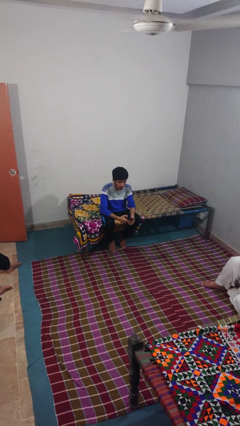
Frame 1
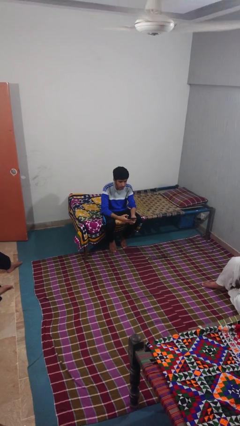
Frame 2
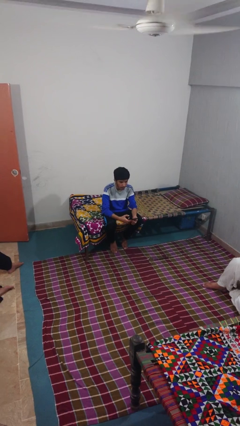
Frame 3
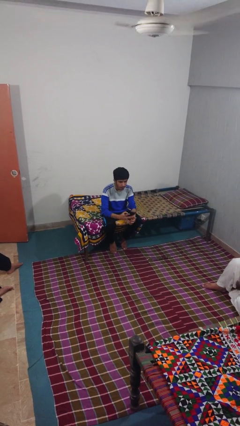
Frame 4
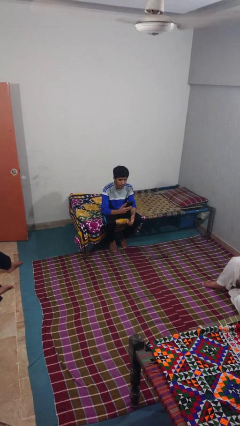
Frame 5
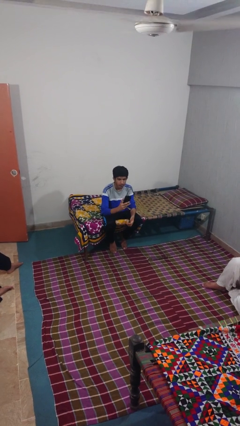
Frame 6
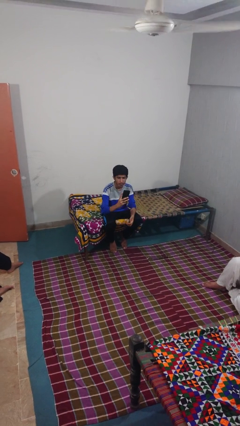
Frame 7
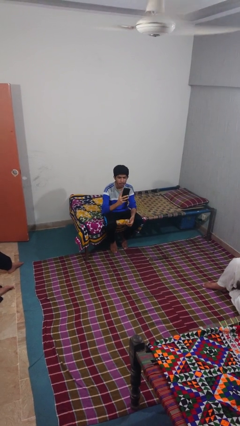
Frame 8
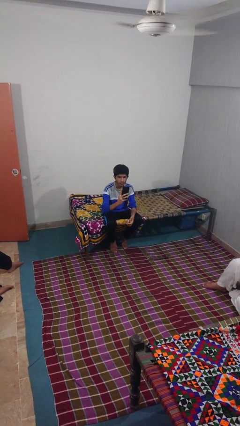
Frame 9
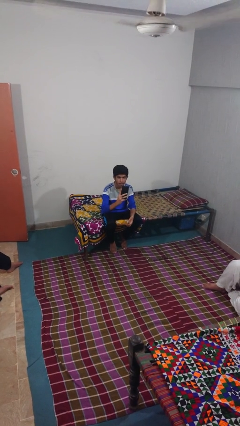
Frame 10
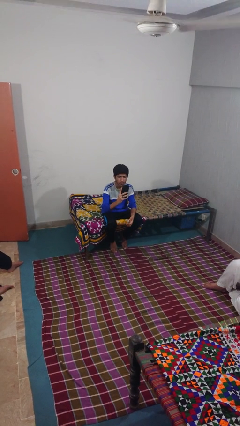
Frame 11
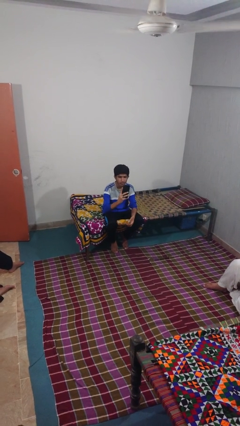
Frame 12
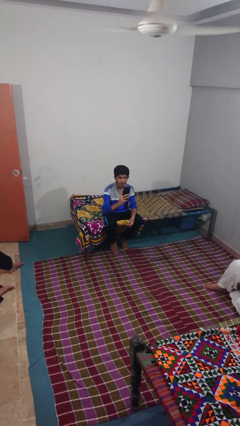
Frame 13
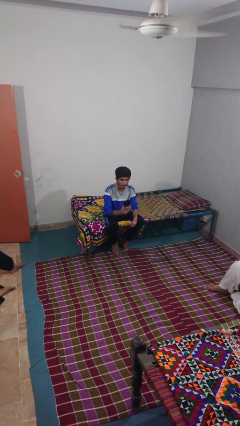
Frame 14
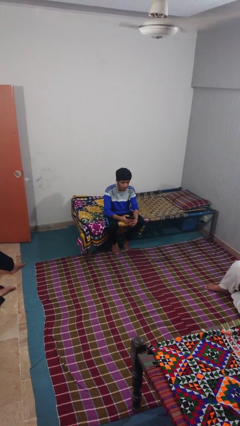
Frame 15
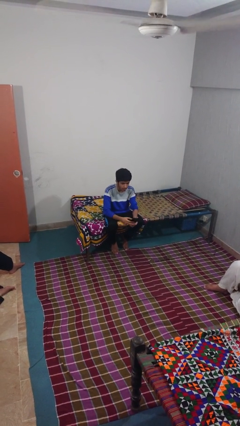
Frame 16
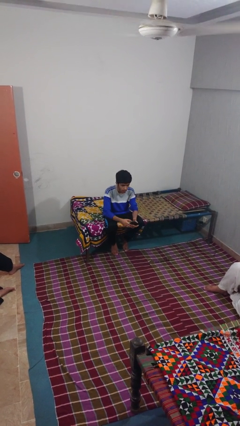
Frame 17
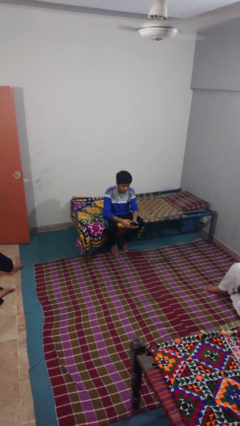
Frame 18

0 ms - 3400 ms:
person takes selfie

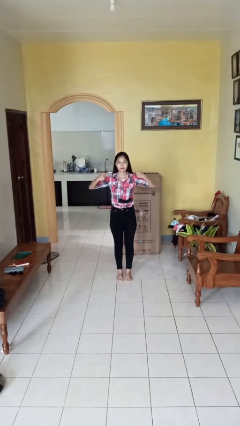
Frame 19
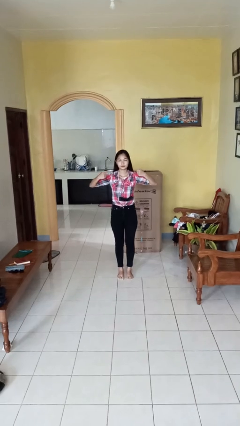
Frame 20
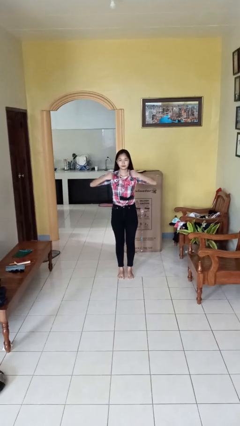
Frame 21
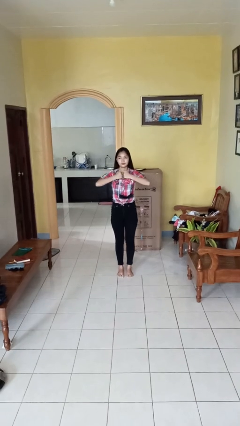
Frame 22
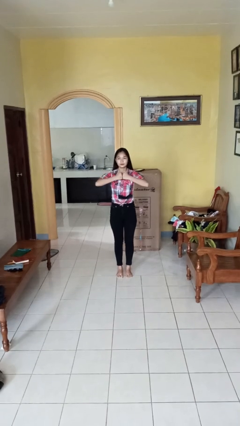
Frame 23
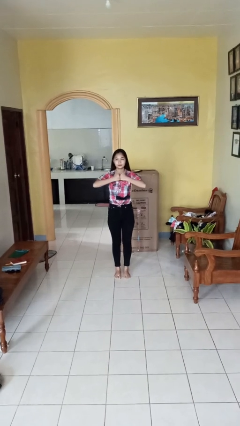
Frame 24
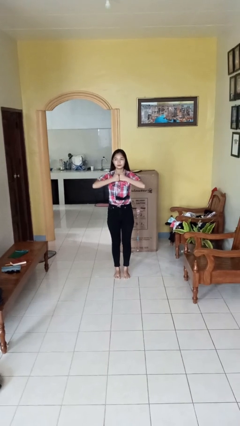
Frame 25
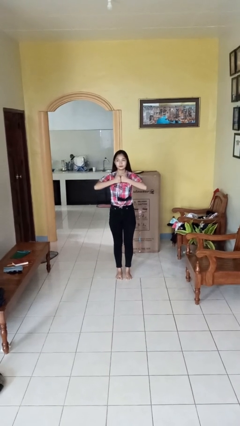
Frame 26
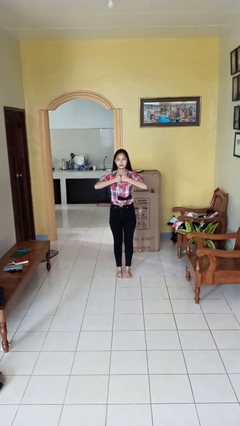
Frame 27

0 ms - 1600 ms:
person gestures zoom out

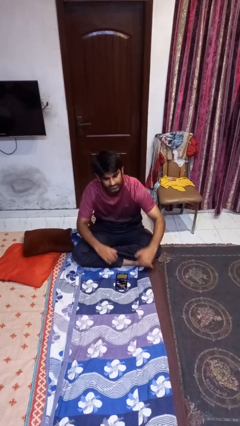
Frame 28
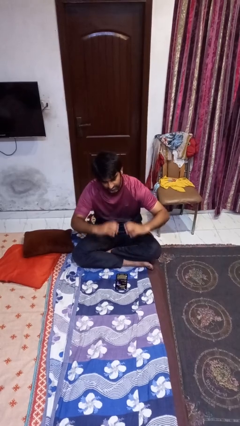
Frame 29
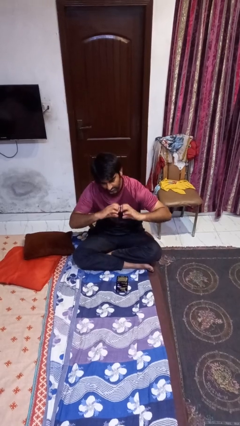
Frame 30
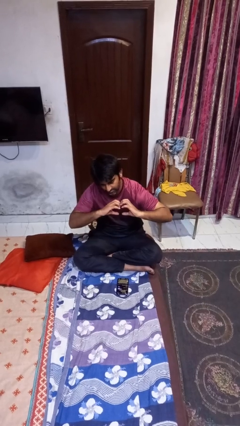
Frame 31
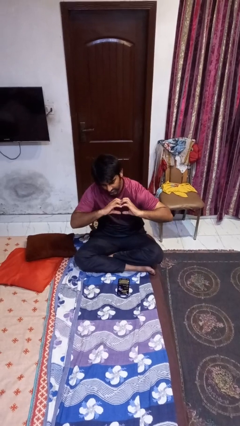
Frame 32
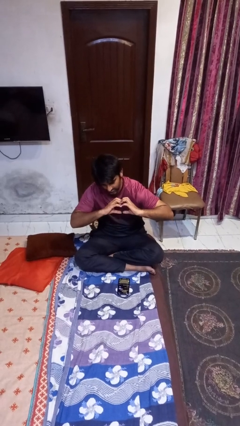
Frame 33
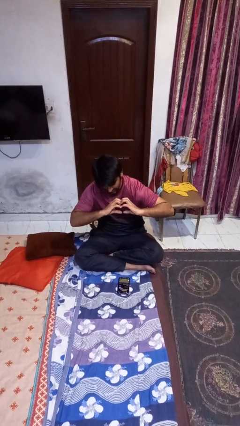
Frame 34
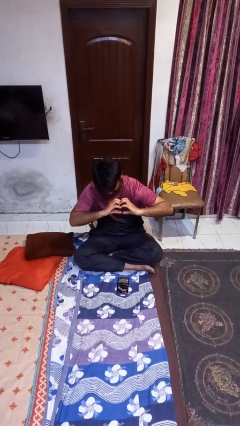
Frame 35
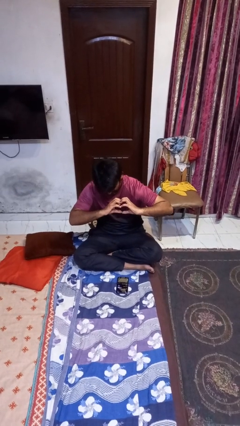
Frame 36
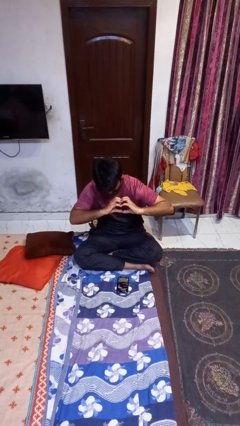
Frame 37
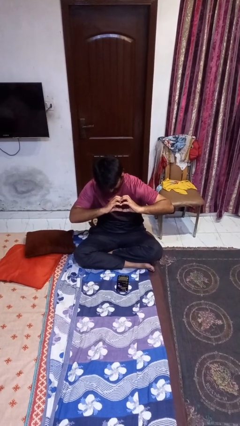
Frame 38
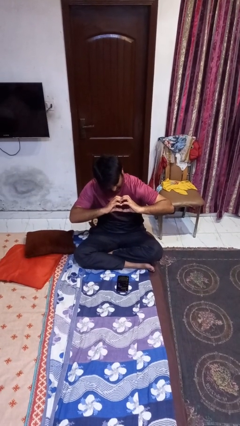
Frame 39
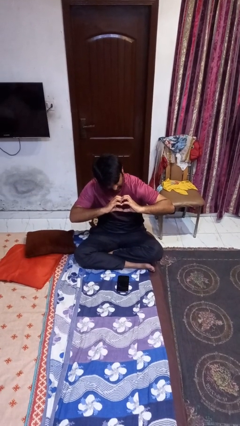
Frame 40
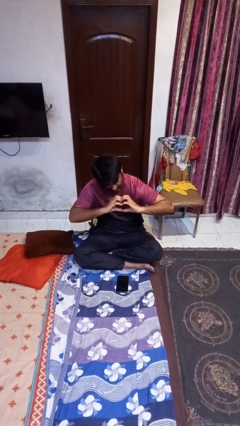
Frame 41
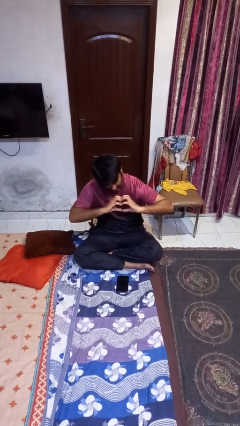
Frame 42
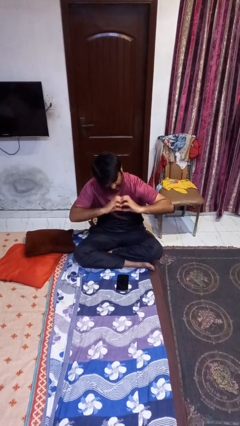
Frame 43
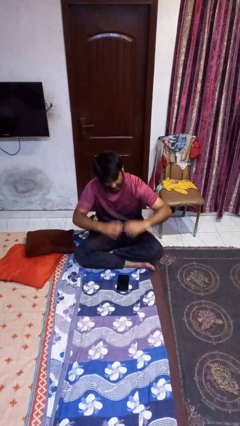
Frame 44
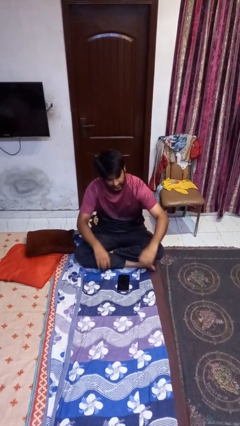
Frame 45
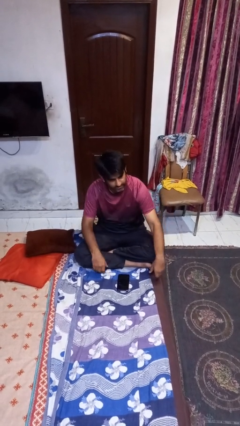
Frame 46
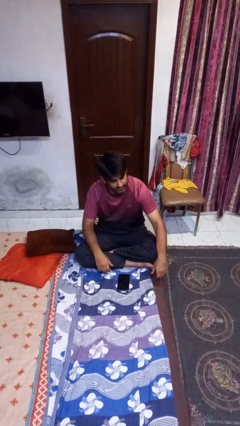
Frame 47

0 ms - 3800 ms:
person gestures heart

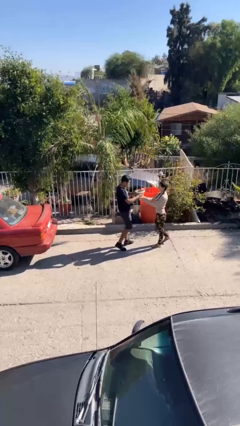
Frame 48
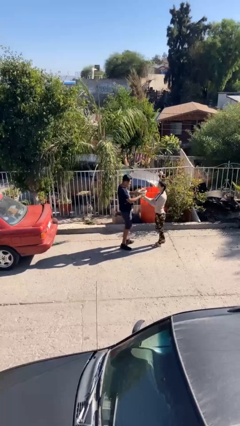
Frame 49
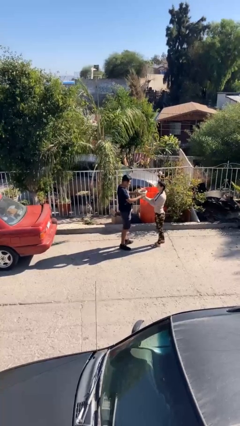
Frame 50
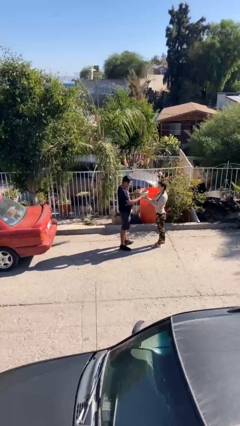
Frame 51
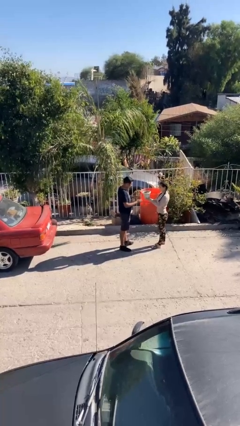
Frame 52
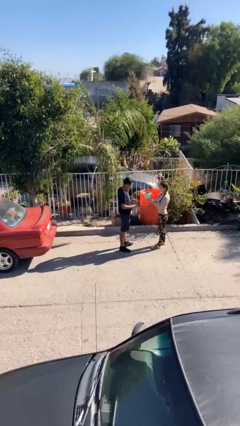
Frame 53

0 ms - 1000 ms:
person transfers object to person

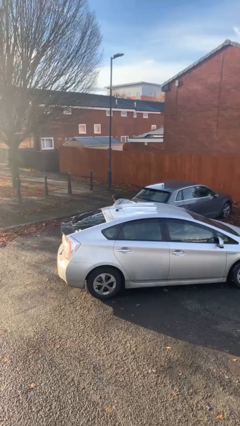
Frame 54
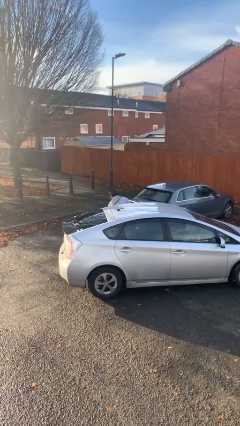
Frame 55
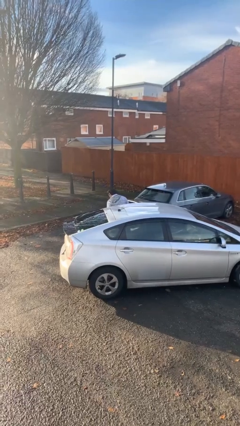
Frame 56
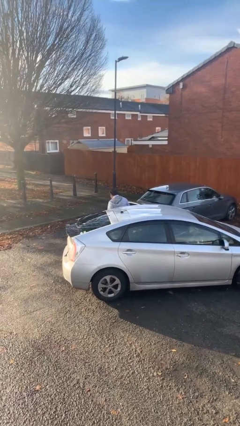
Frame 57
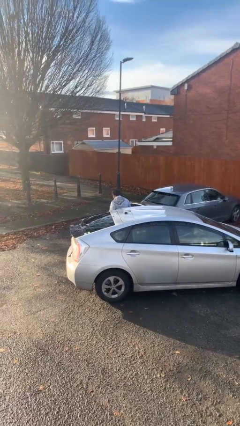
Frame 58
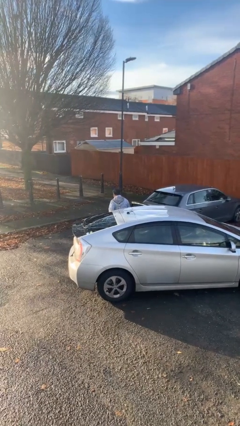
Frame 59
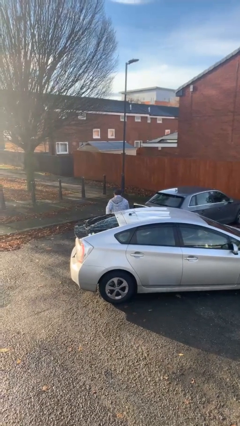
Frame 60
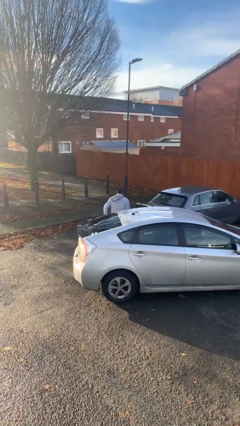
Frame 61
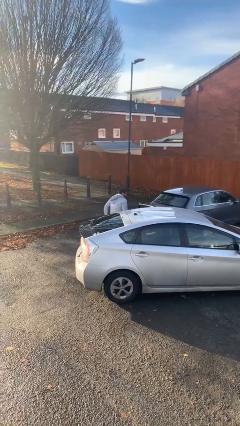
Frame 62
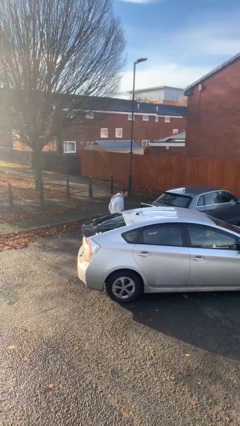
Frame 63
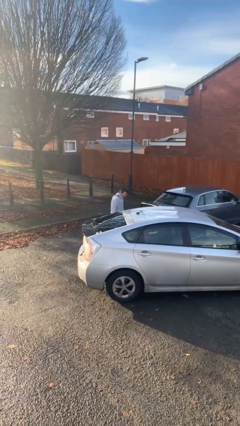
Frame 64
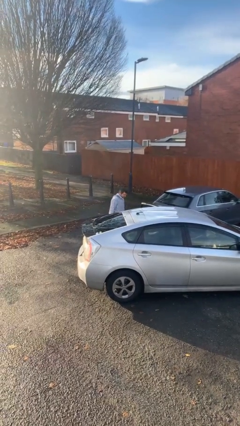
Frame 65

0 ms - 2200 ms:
person exits car

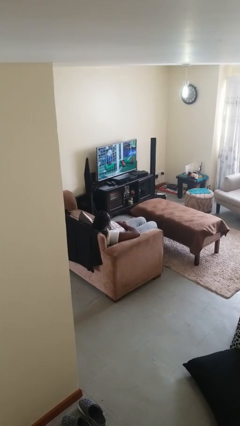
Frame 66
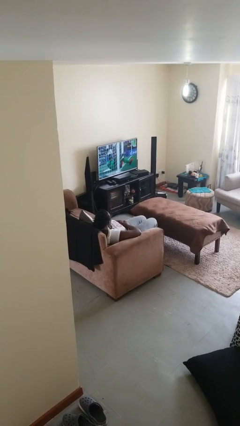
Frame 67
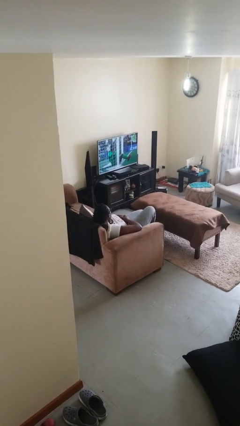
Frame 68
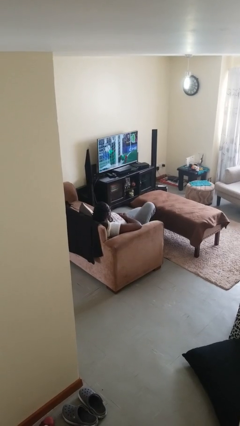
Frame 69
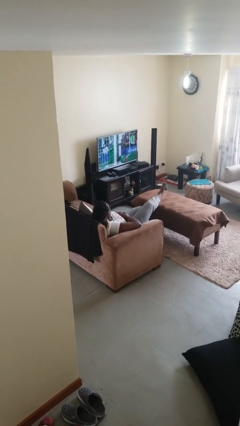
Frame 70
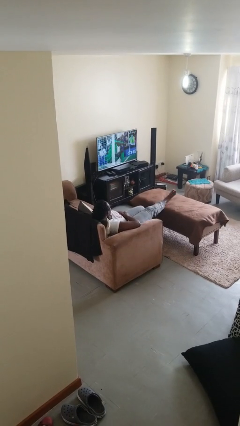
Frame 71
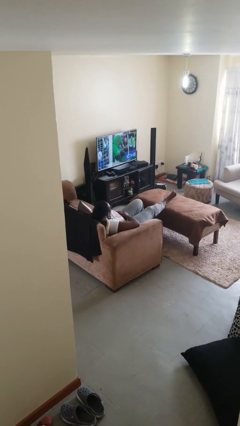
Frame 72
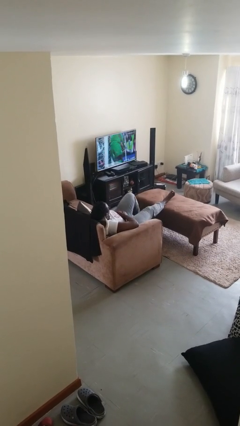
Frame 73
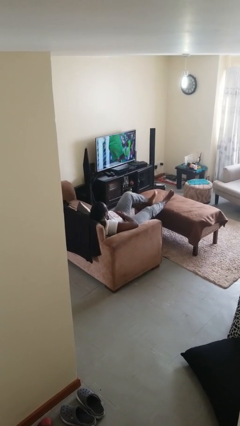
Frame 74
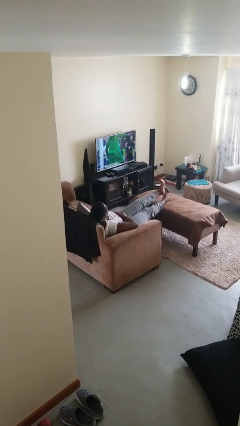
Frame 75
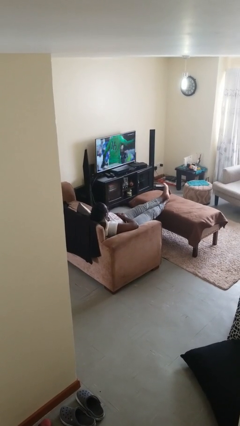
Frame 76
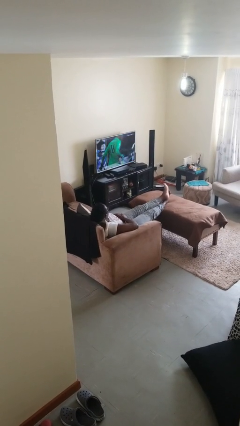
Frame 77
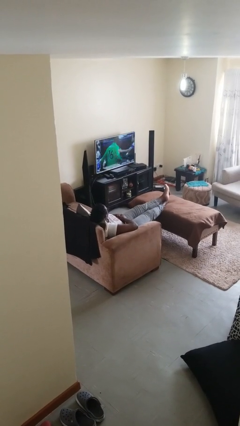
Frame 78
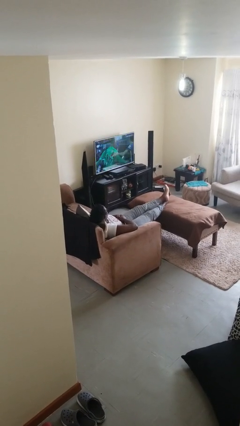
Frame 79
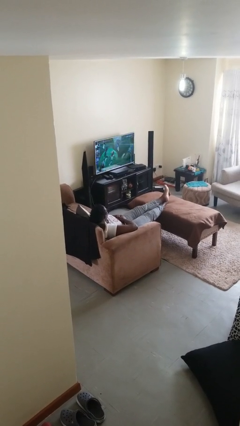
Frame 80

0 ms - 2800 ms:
person puts feet up

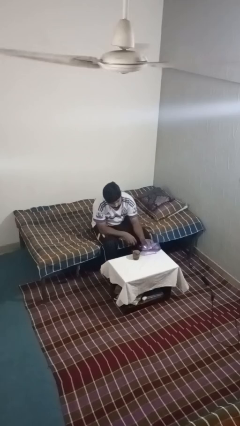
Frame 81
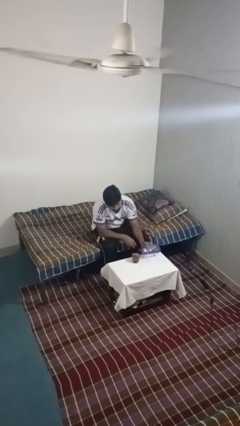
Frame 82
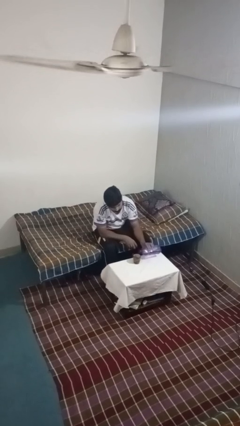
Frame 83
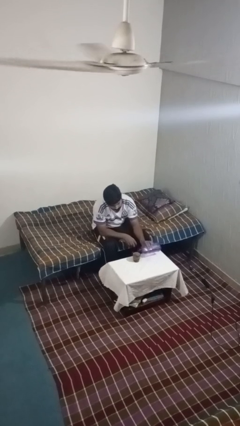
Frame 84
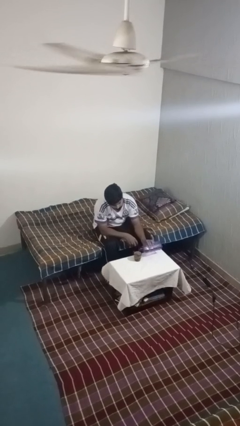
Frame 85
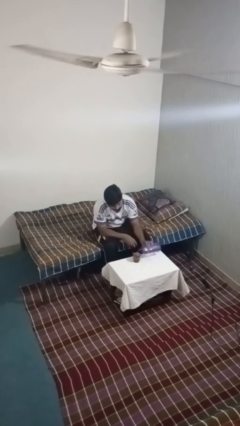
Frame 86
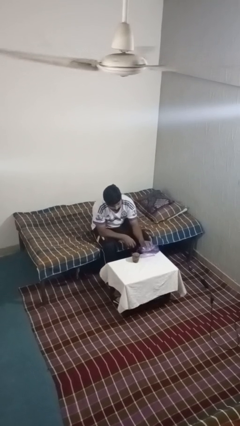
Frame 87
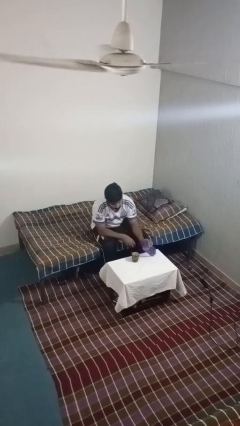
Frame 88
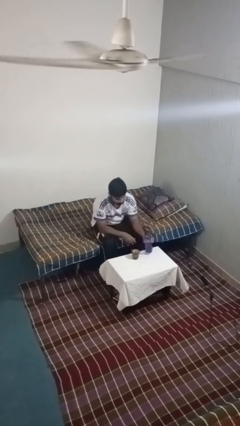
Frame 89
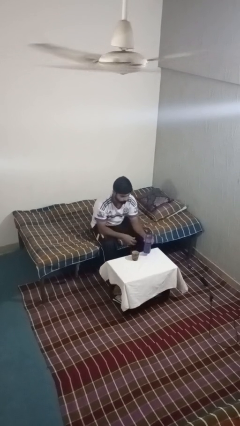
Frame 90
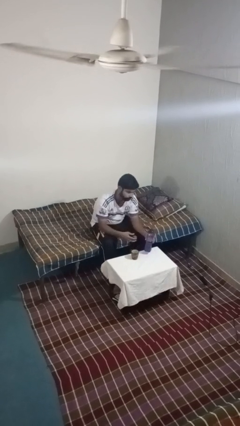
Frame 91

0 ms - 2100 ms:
person pours liquid into cup
